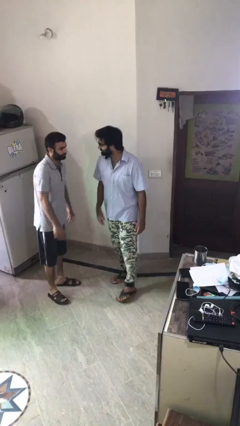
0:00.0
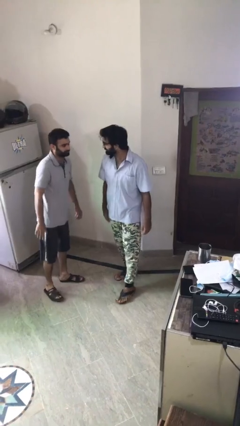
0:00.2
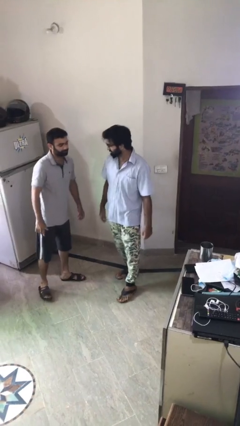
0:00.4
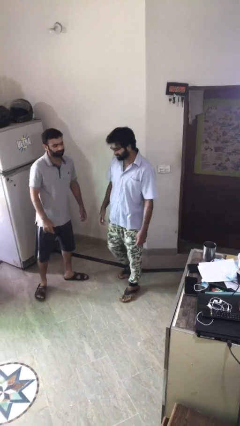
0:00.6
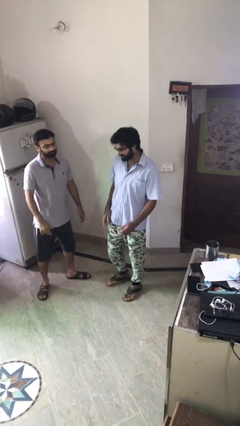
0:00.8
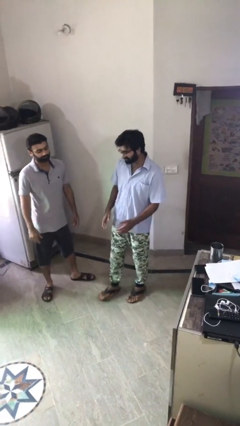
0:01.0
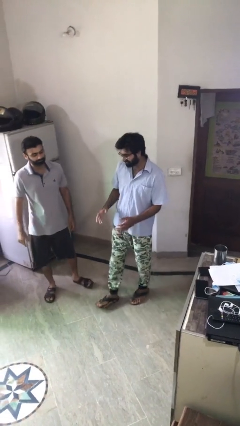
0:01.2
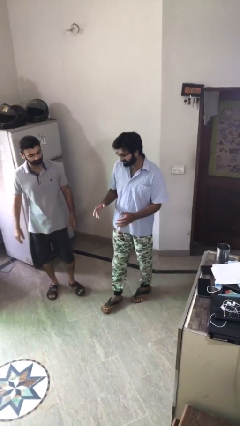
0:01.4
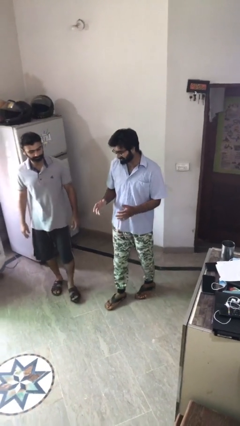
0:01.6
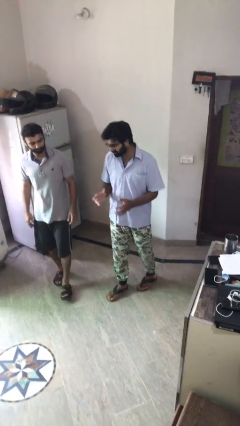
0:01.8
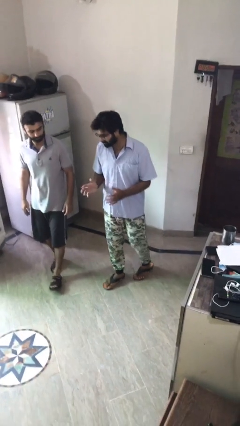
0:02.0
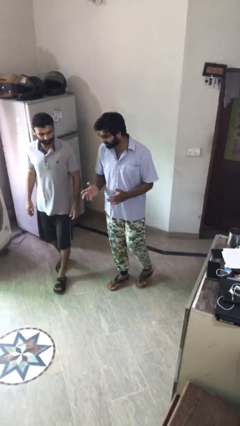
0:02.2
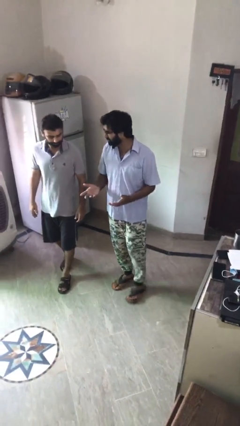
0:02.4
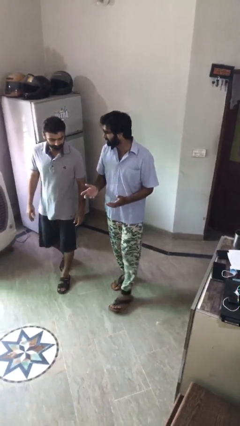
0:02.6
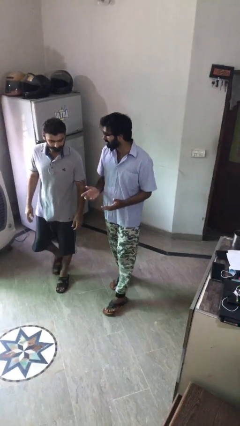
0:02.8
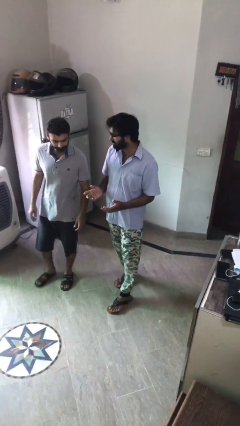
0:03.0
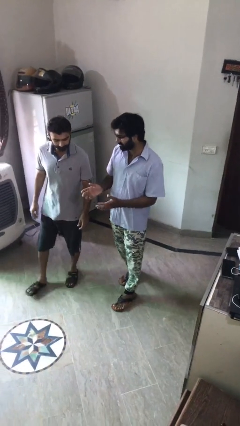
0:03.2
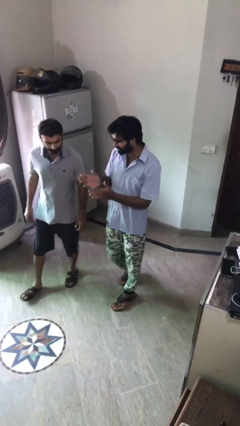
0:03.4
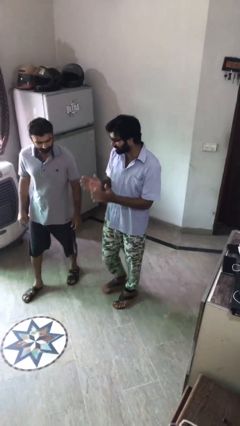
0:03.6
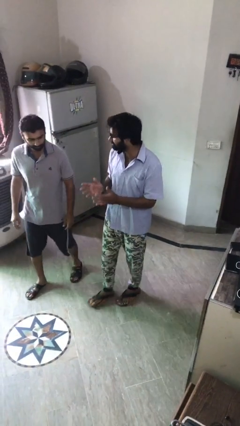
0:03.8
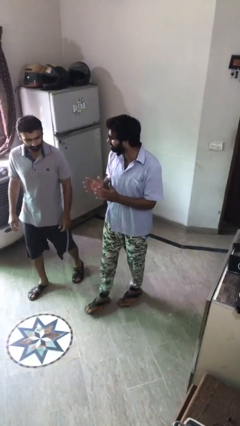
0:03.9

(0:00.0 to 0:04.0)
person talks to person

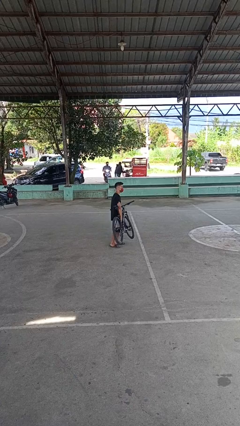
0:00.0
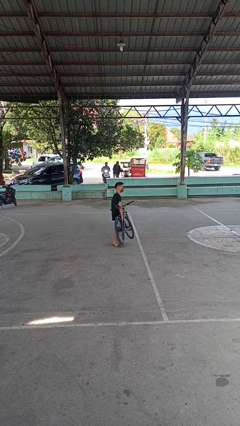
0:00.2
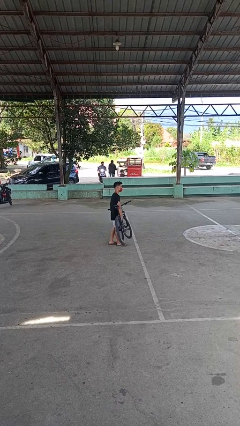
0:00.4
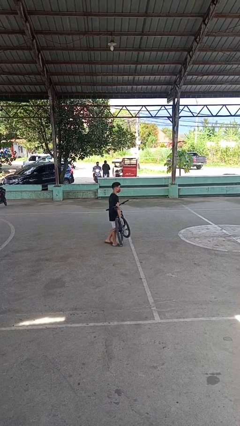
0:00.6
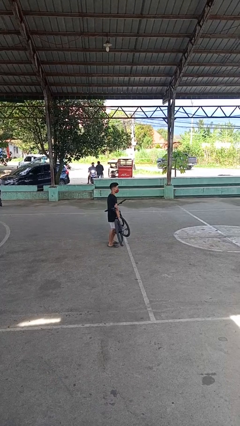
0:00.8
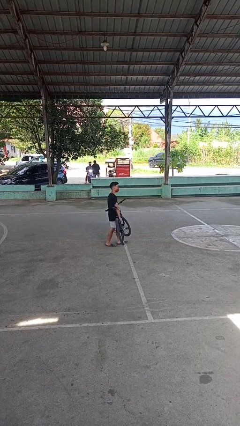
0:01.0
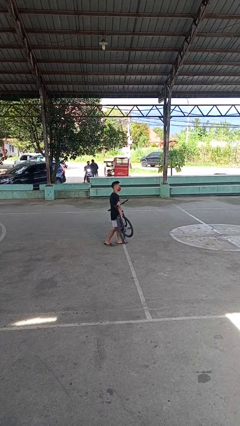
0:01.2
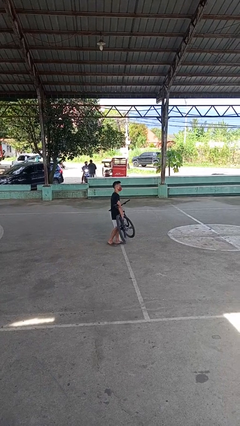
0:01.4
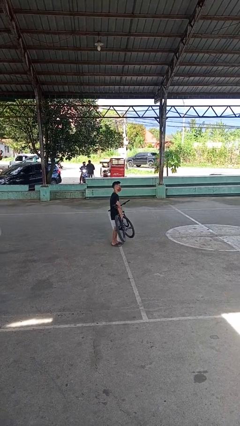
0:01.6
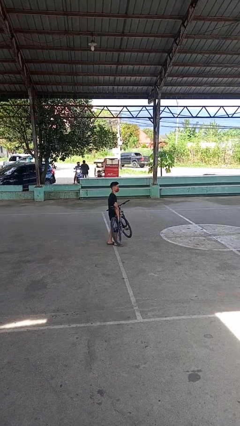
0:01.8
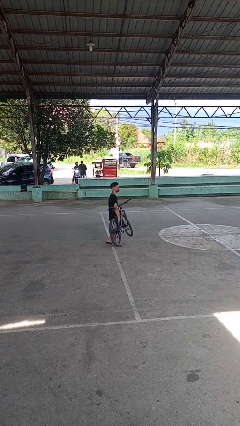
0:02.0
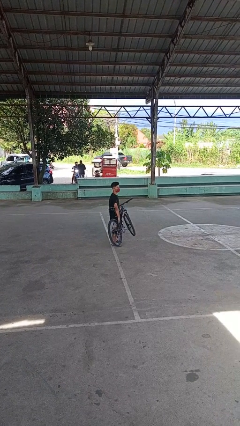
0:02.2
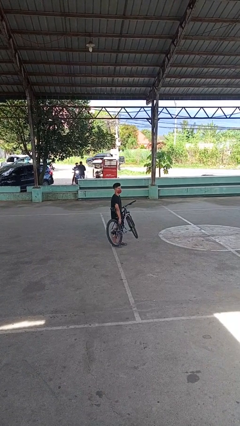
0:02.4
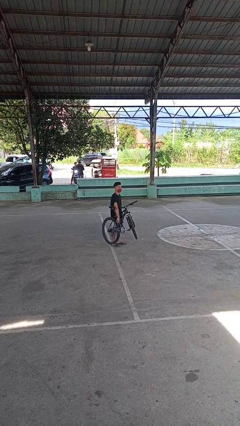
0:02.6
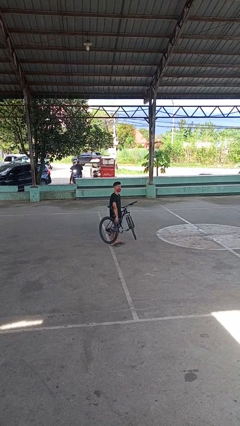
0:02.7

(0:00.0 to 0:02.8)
person carries bicycle

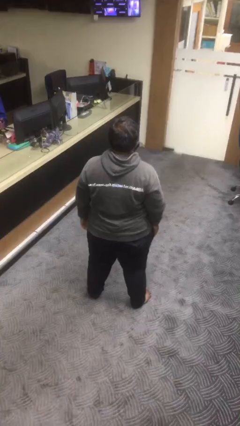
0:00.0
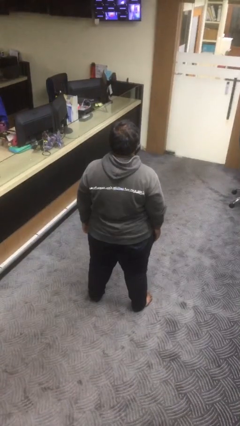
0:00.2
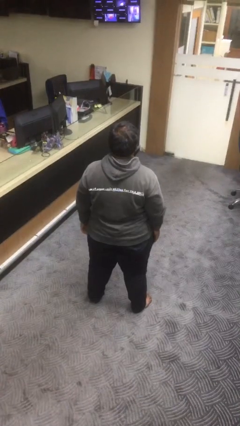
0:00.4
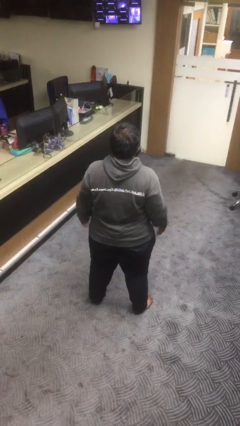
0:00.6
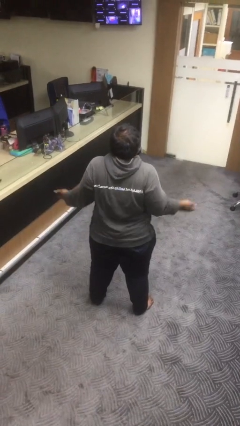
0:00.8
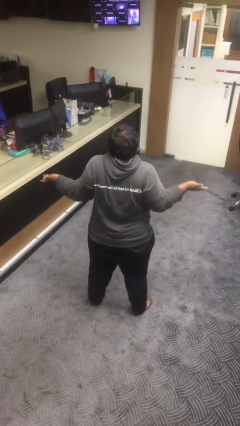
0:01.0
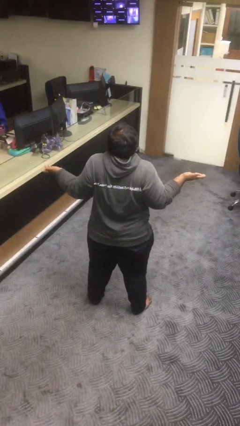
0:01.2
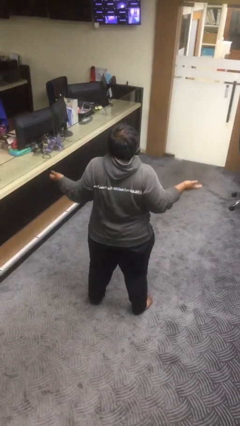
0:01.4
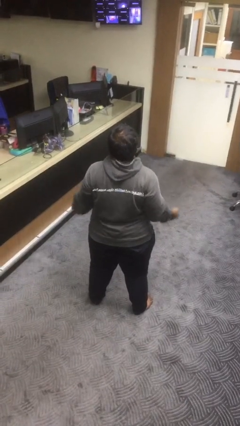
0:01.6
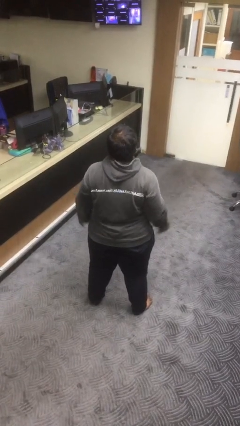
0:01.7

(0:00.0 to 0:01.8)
person shrugs

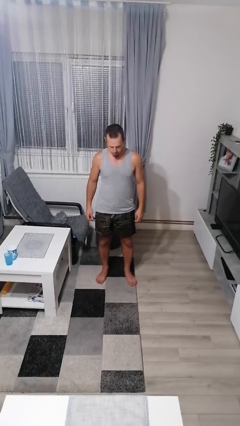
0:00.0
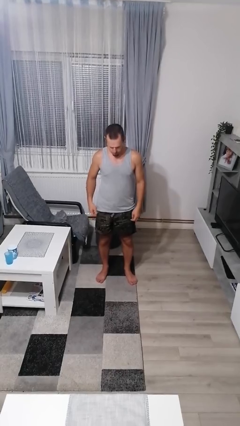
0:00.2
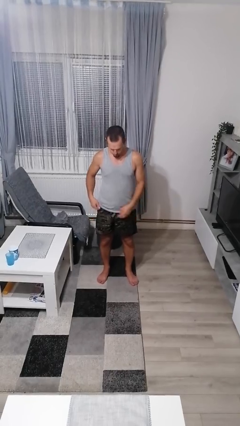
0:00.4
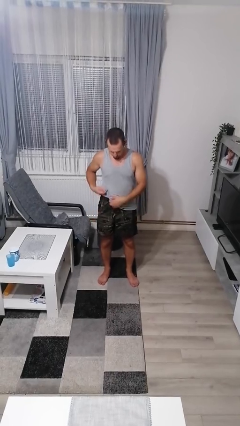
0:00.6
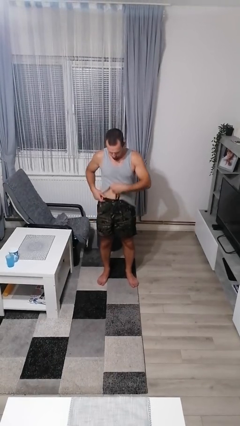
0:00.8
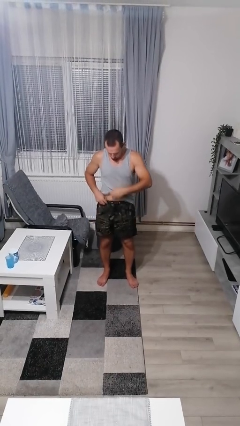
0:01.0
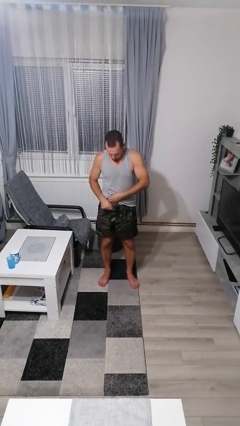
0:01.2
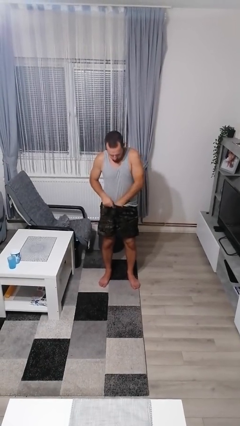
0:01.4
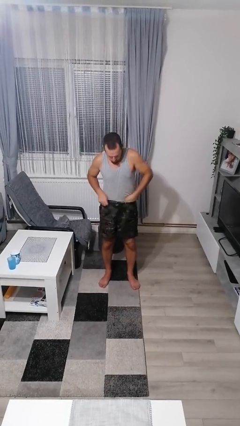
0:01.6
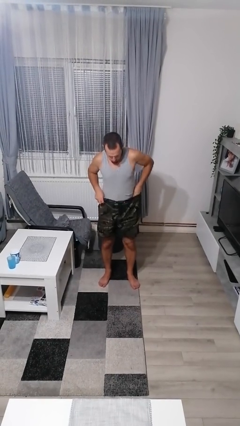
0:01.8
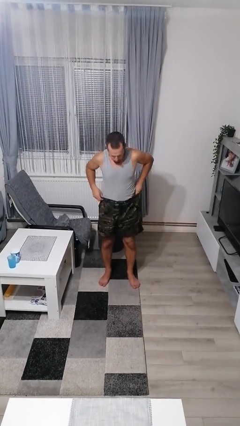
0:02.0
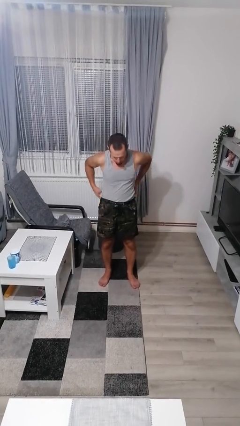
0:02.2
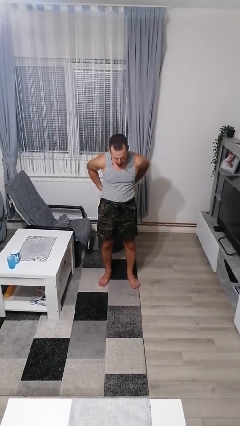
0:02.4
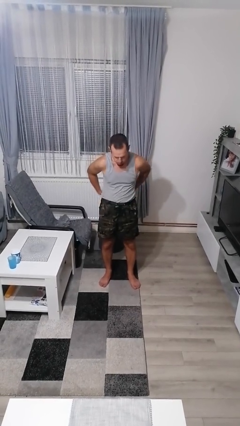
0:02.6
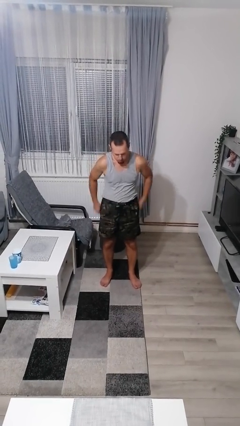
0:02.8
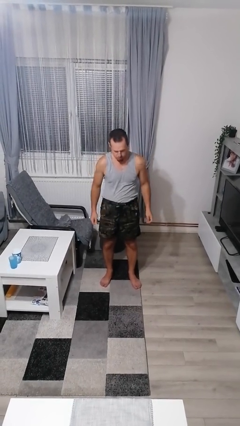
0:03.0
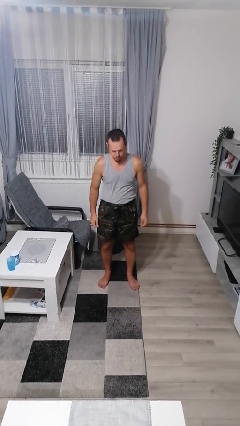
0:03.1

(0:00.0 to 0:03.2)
person tucks in shirt

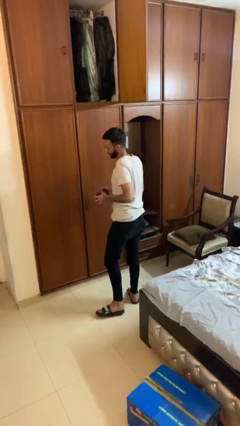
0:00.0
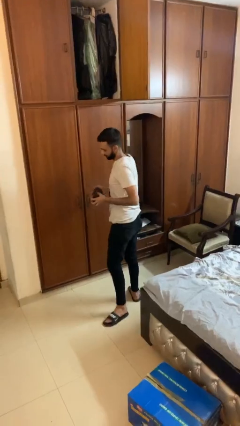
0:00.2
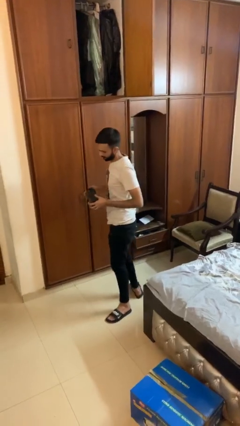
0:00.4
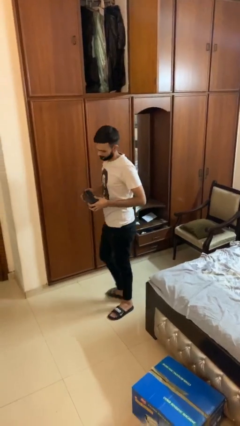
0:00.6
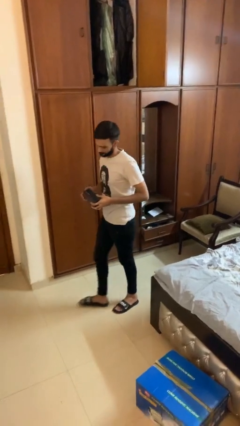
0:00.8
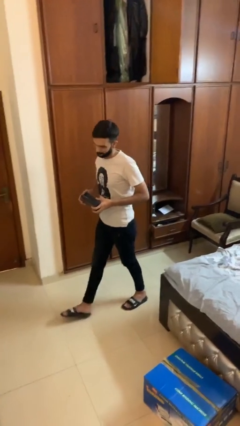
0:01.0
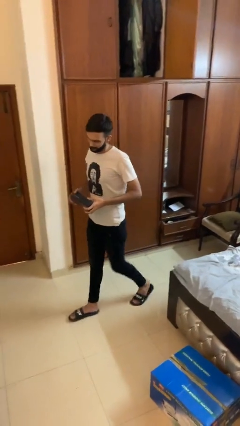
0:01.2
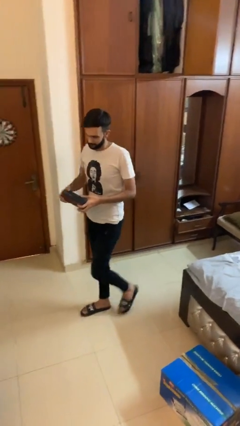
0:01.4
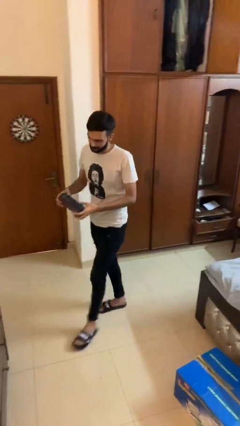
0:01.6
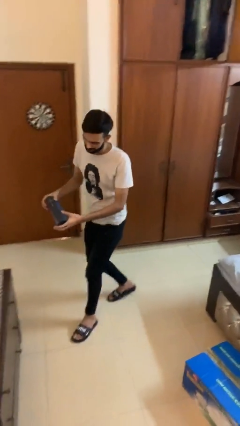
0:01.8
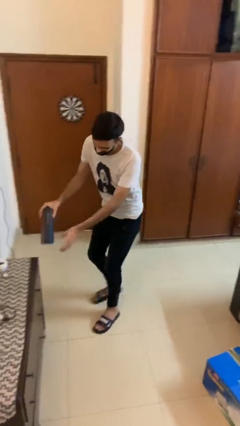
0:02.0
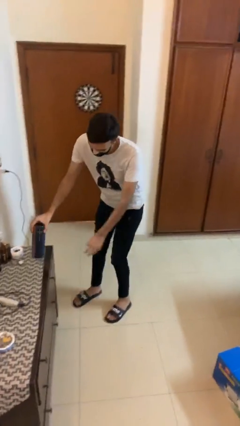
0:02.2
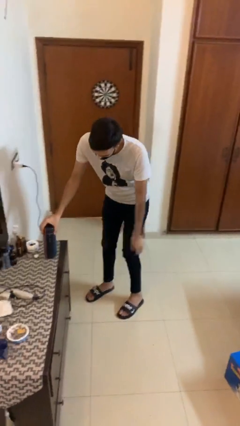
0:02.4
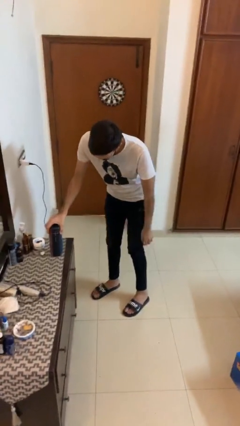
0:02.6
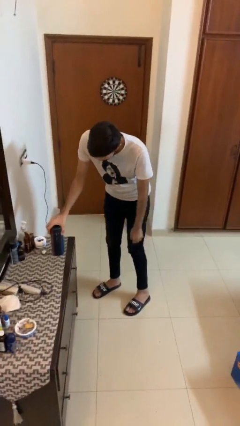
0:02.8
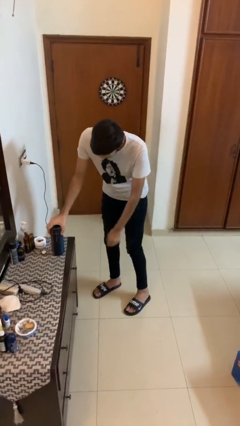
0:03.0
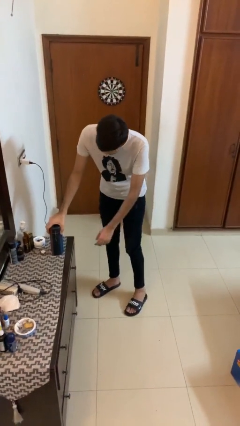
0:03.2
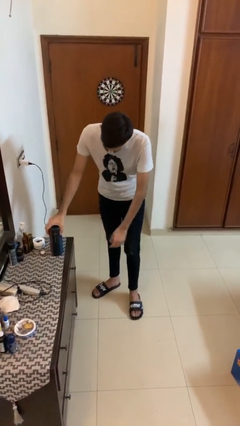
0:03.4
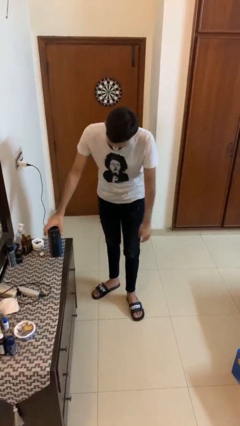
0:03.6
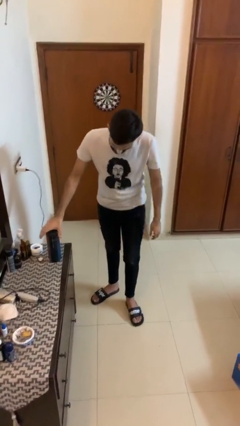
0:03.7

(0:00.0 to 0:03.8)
person puts down object on table

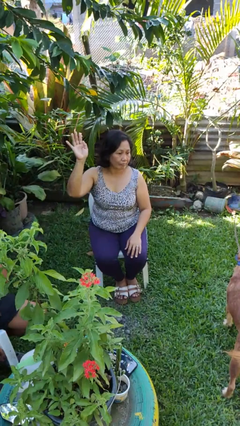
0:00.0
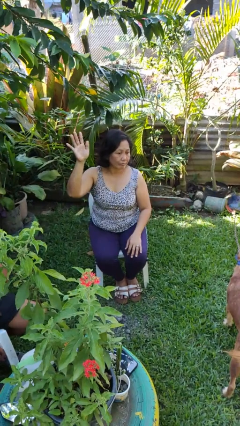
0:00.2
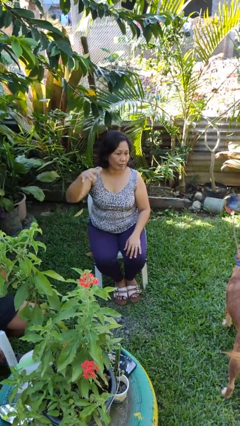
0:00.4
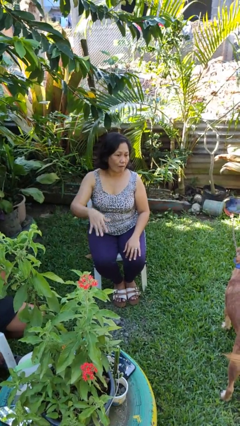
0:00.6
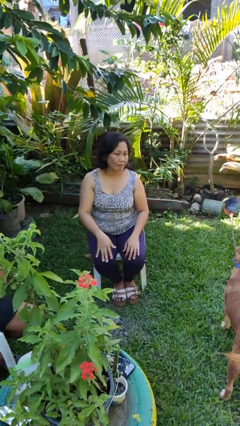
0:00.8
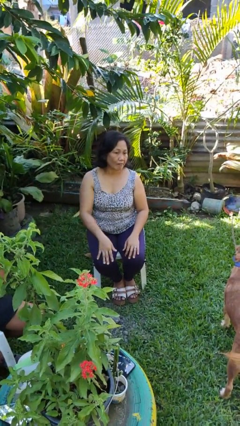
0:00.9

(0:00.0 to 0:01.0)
person gestures lower hand

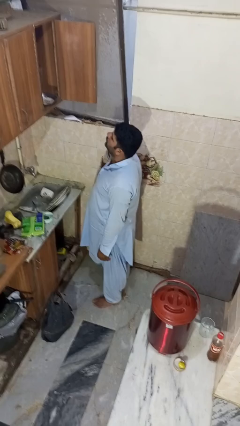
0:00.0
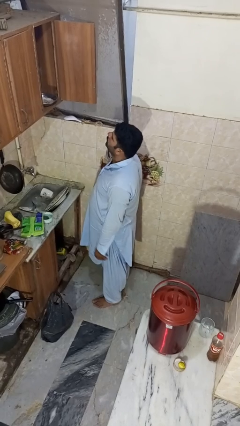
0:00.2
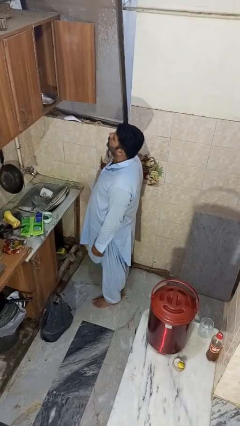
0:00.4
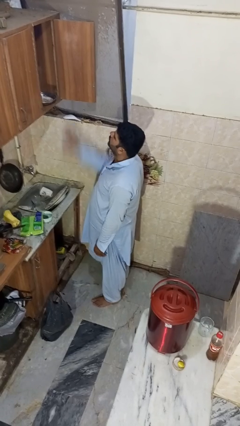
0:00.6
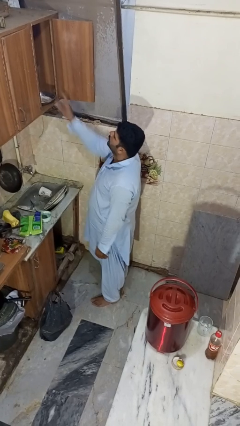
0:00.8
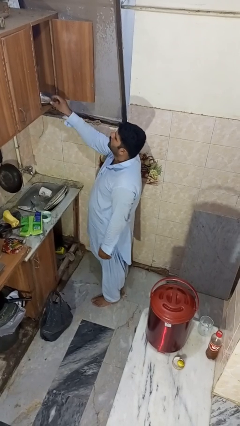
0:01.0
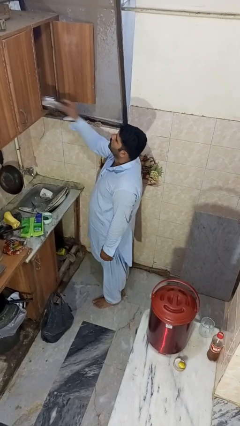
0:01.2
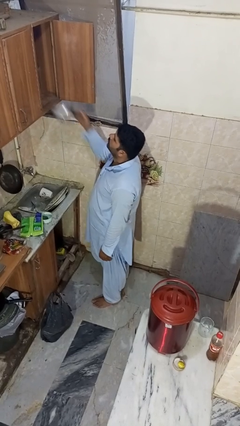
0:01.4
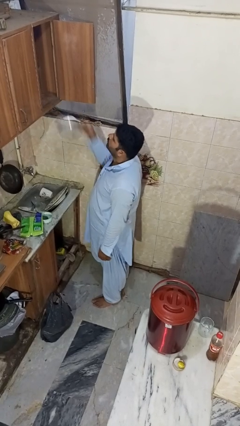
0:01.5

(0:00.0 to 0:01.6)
person takes object from cabinet
